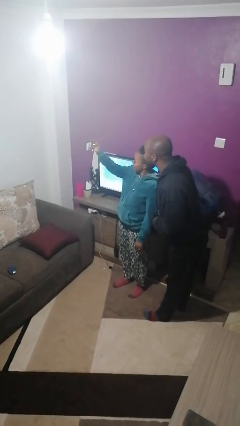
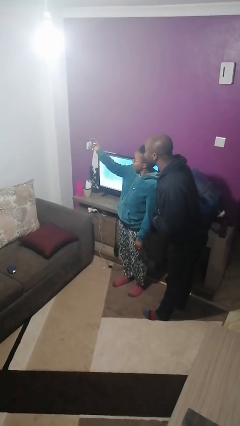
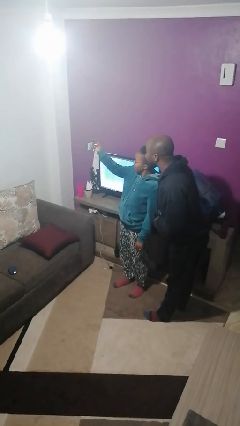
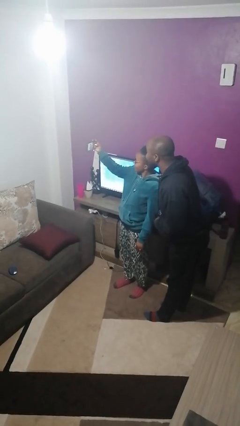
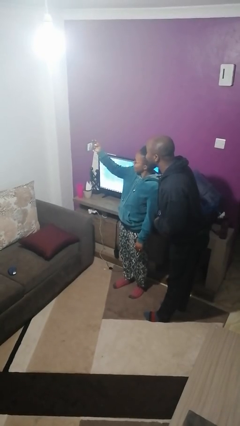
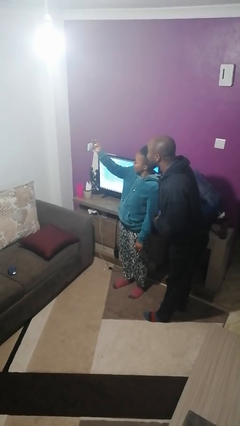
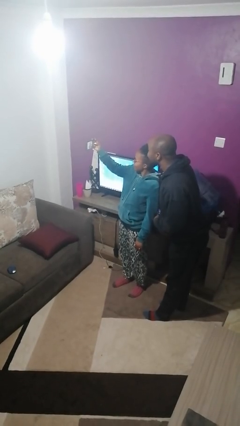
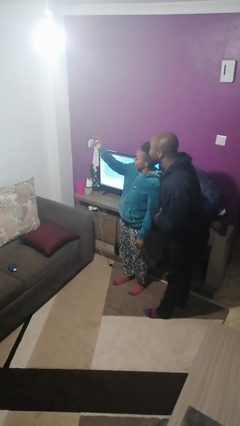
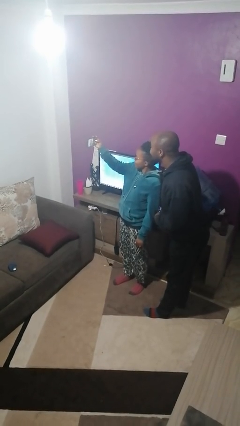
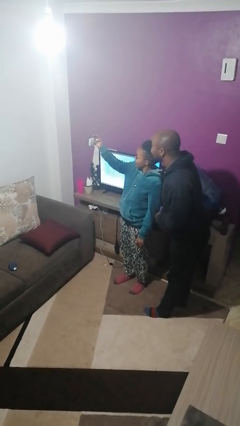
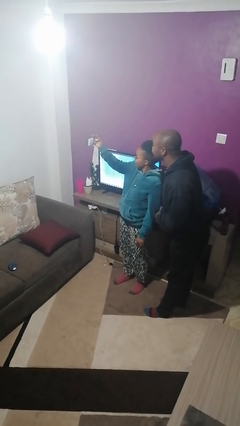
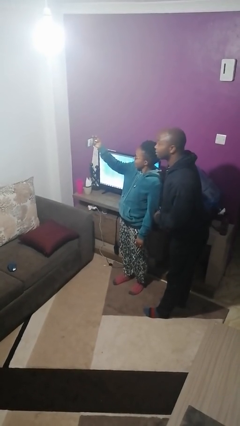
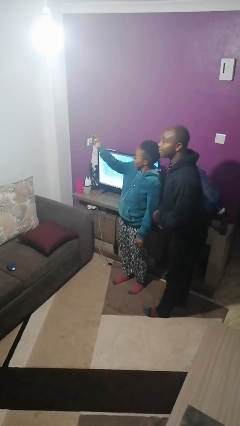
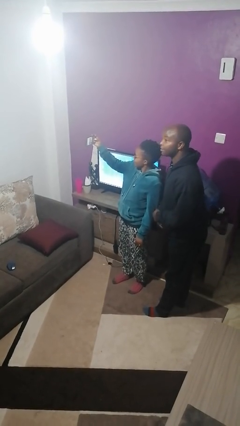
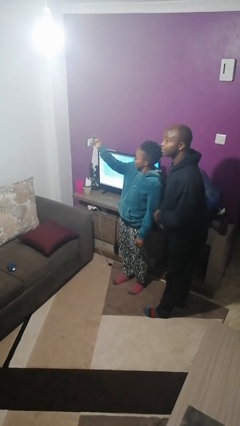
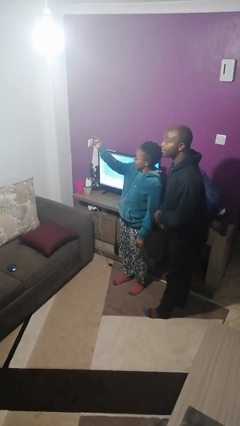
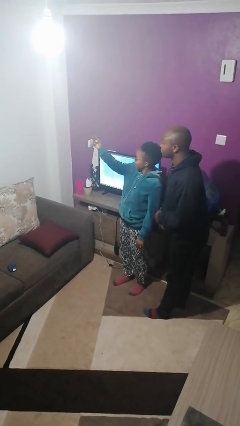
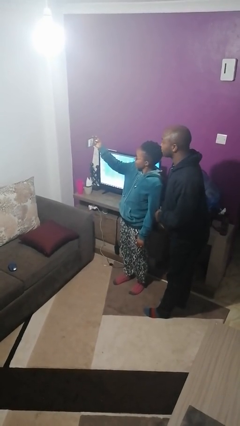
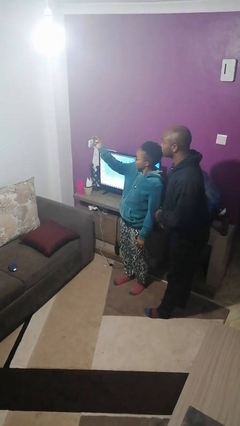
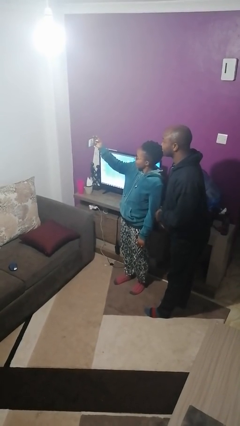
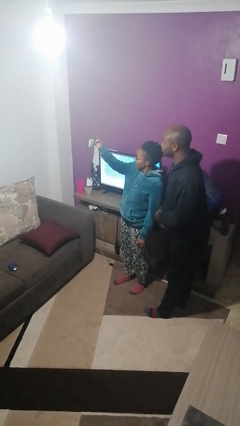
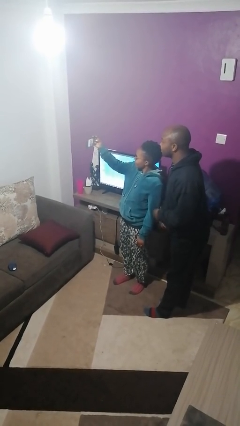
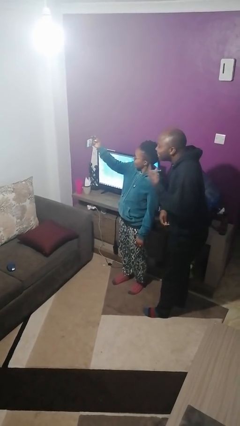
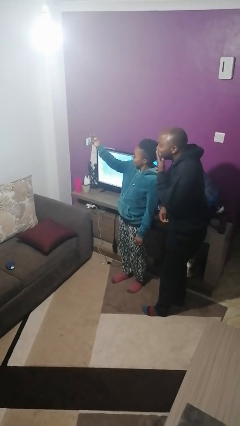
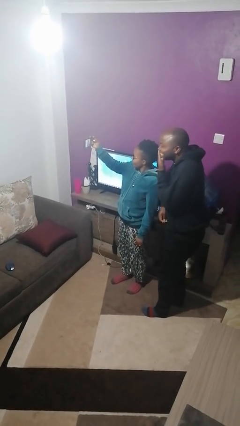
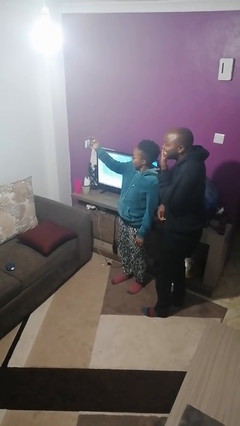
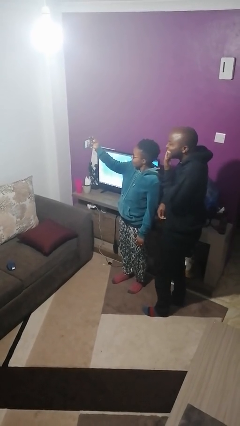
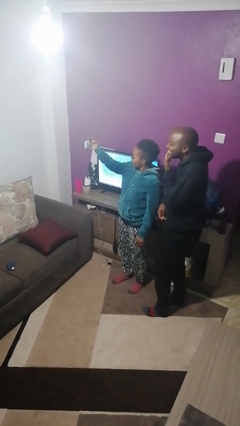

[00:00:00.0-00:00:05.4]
person takes selfie with person

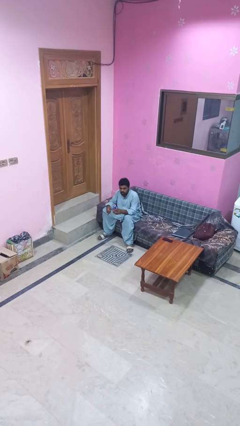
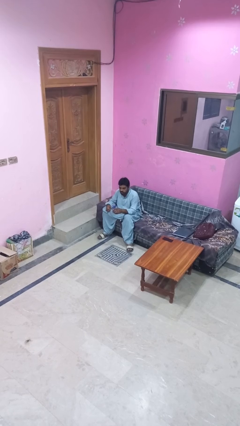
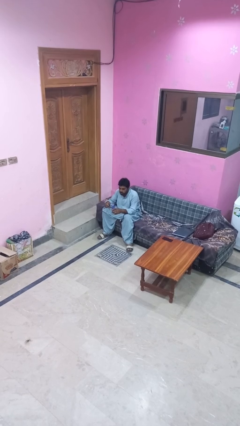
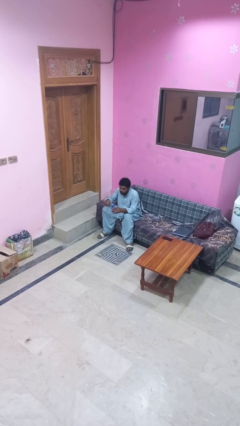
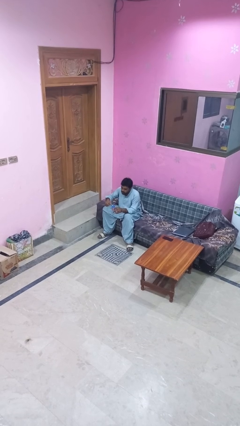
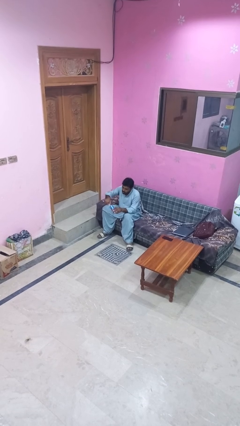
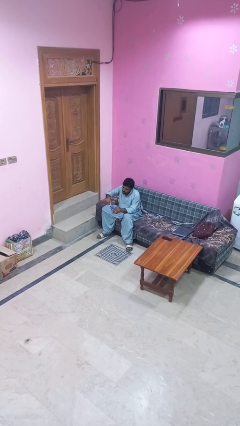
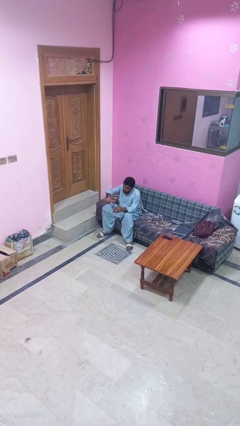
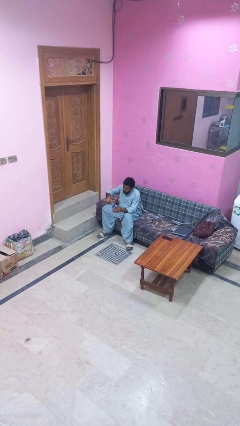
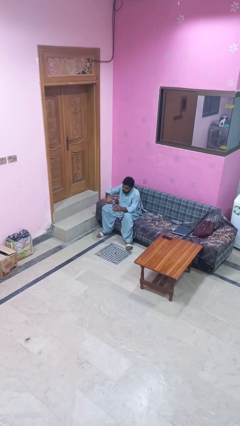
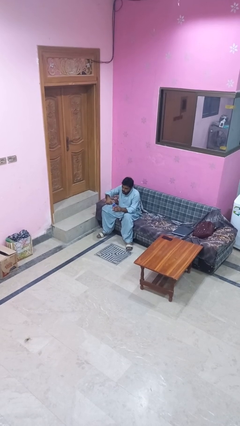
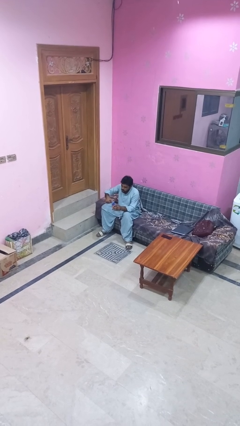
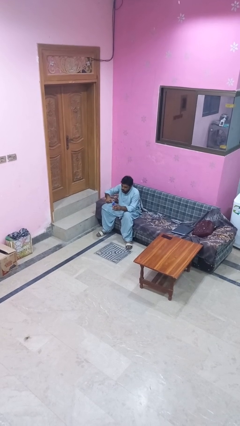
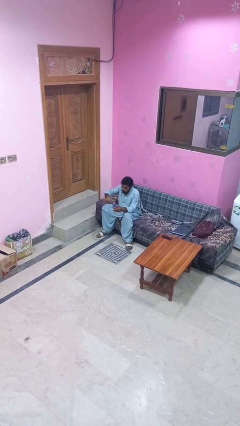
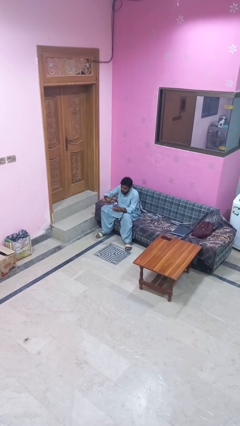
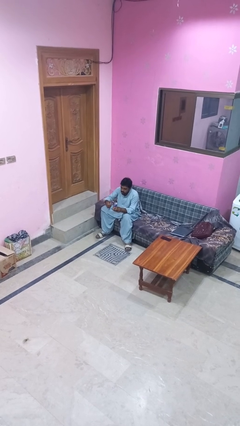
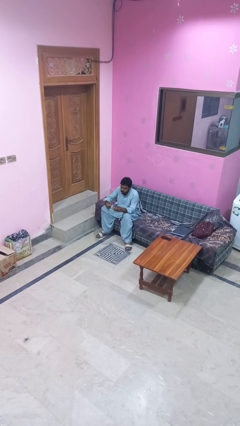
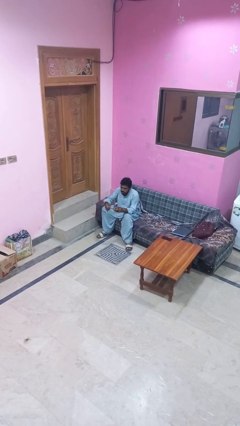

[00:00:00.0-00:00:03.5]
person opens can with can opener

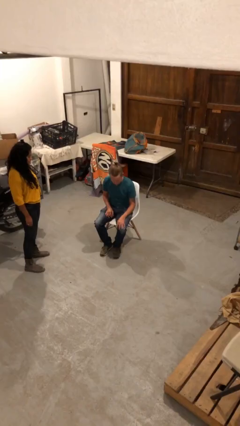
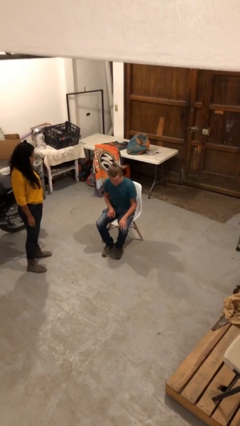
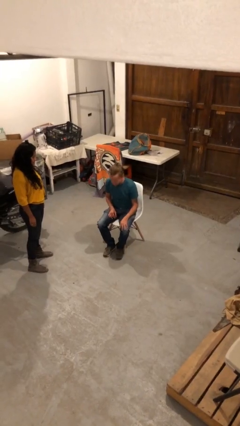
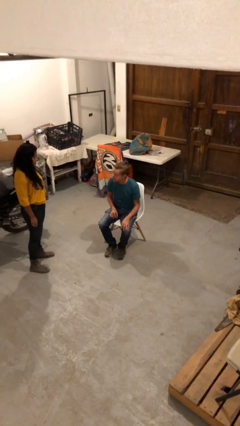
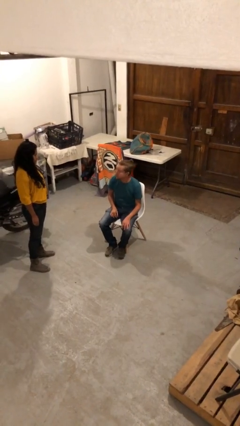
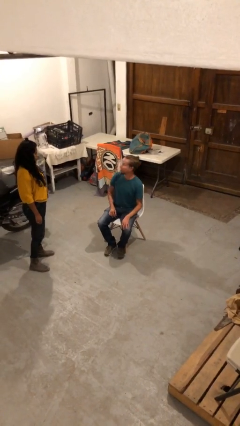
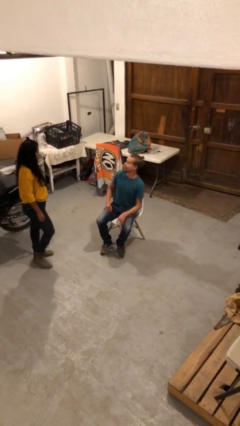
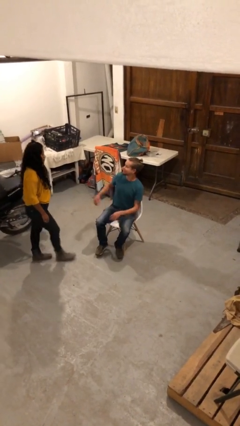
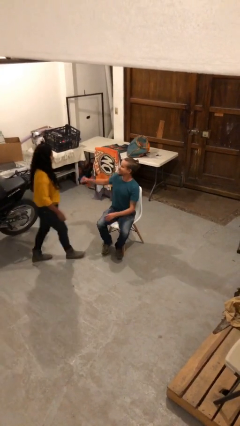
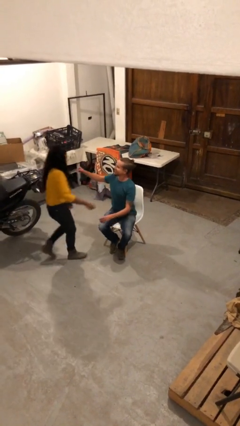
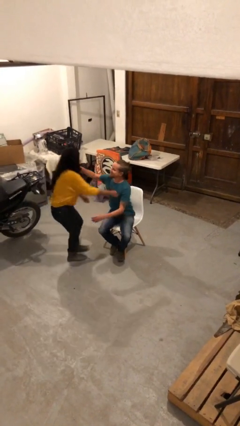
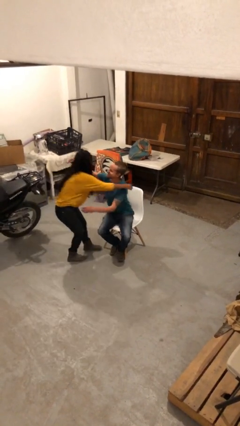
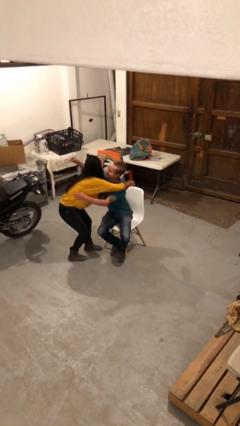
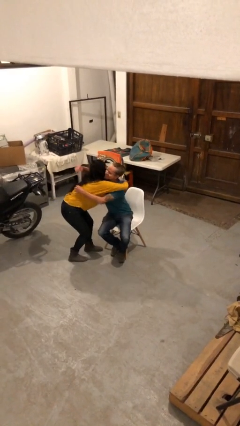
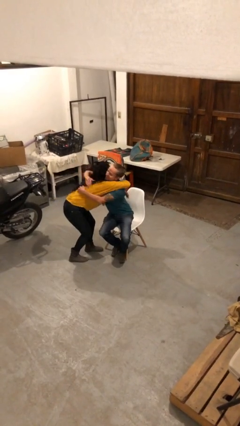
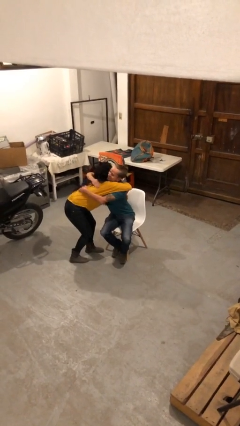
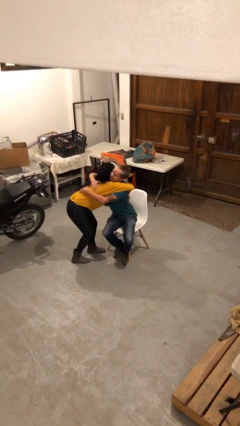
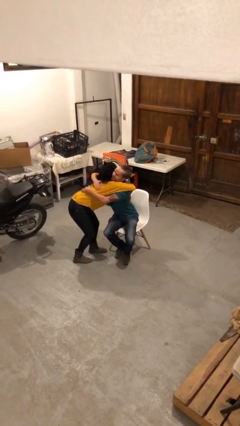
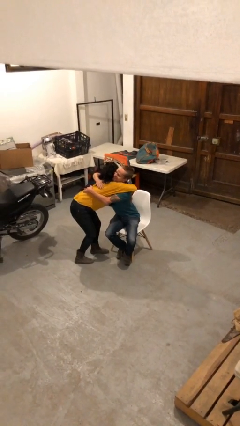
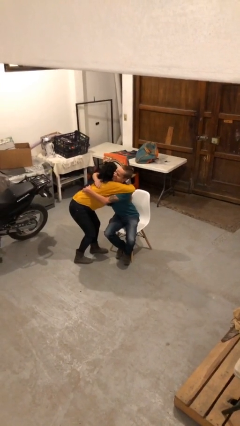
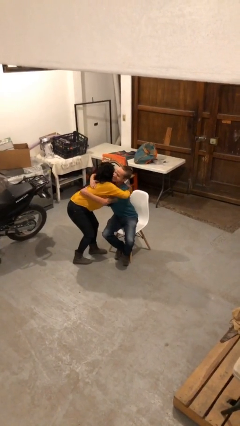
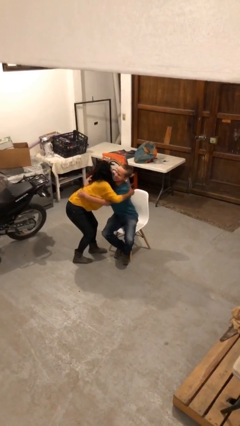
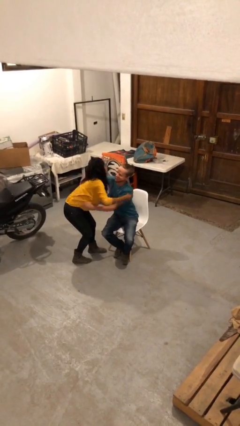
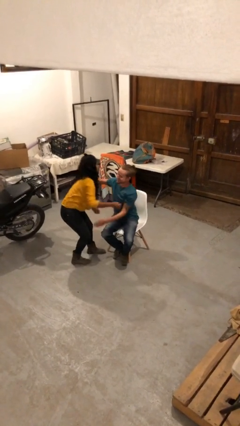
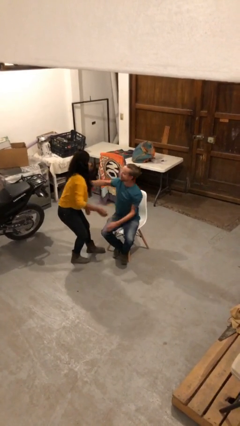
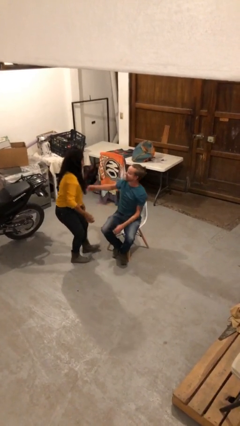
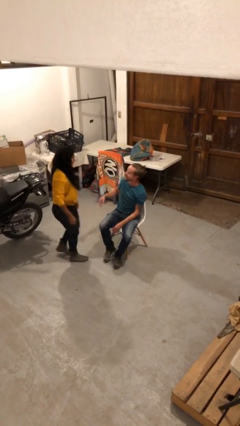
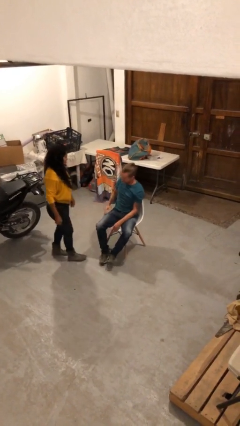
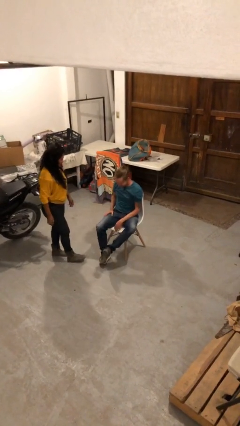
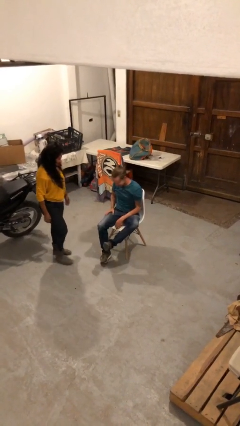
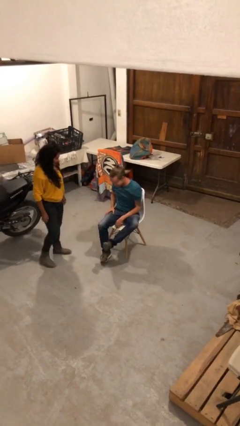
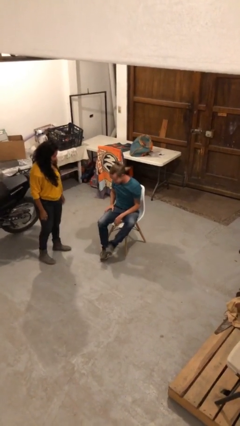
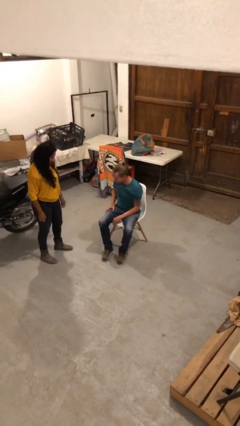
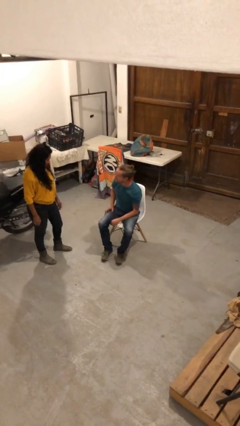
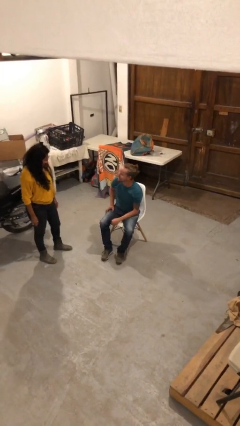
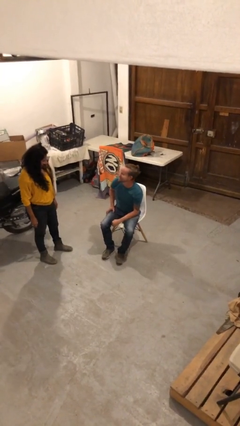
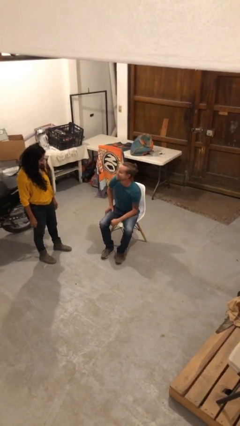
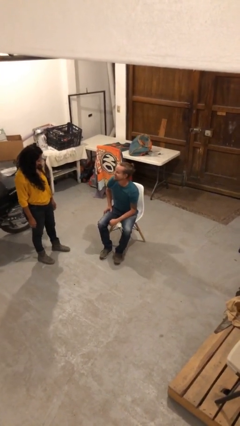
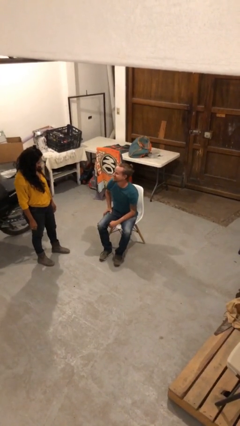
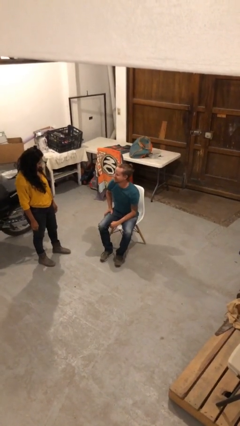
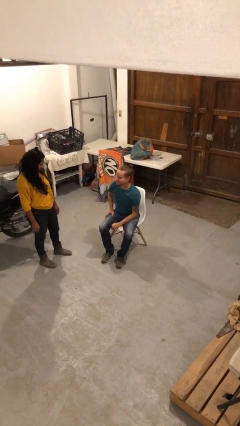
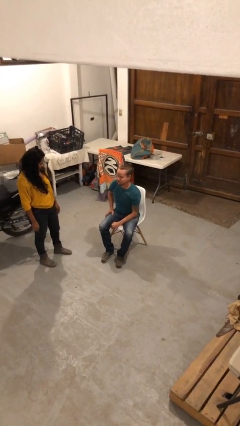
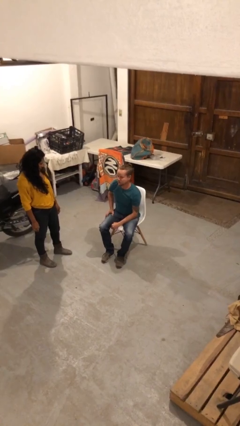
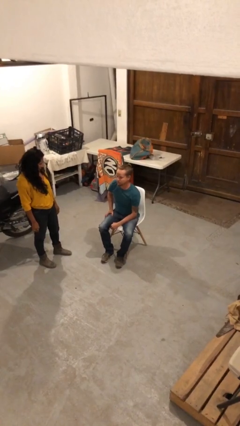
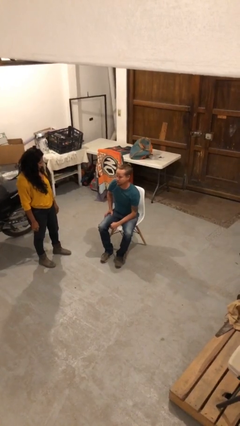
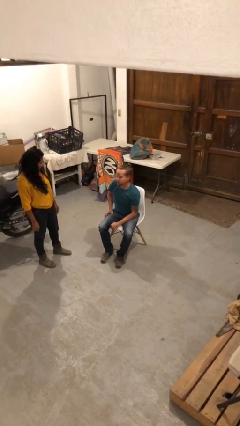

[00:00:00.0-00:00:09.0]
person embraces person

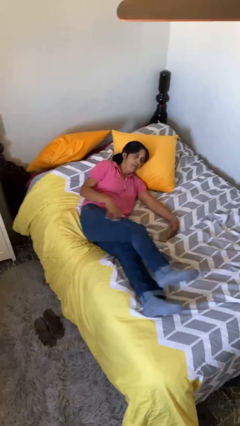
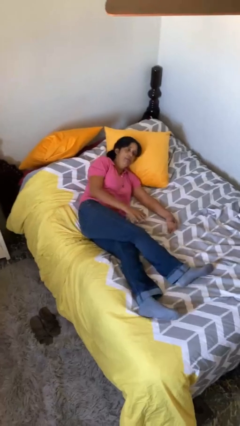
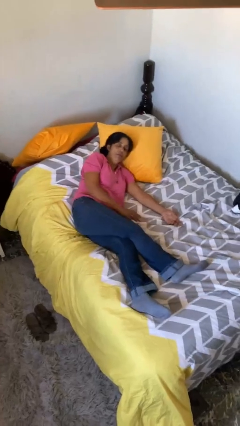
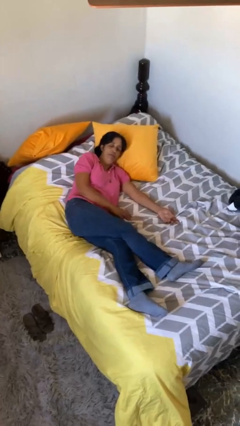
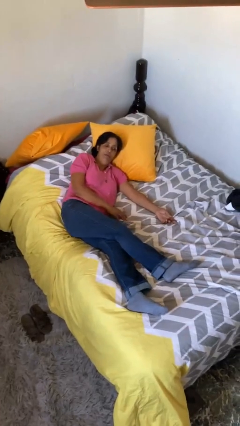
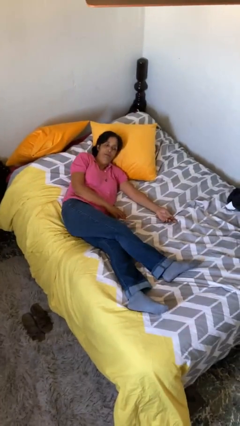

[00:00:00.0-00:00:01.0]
person lies down on bed
